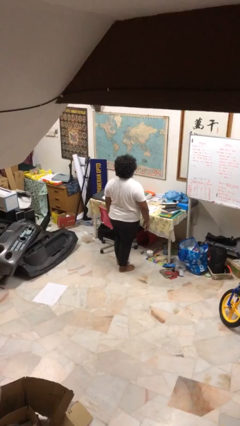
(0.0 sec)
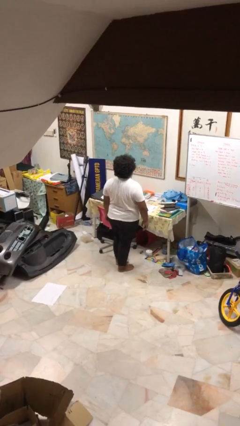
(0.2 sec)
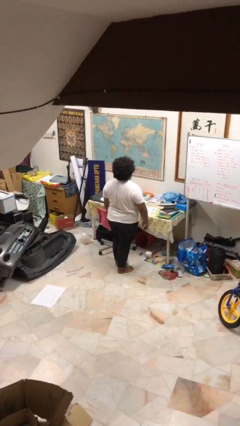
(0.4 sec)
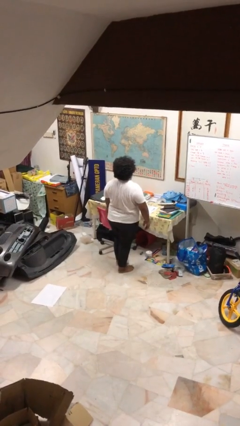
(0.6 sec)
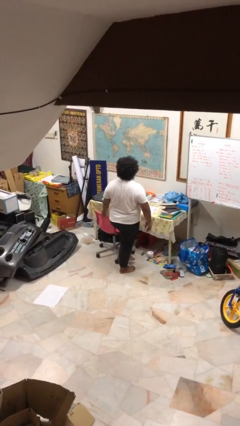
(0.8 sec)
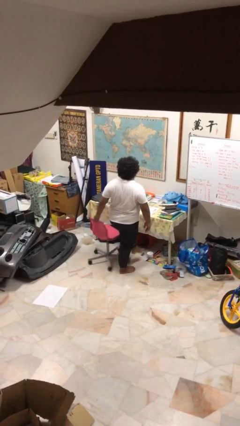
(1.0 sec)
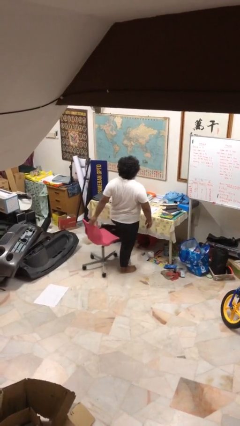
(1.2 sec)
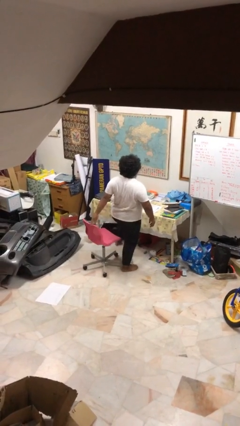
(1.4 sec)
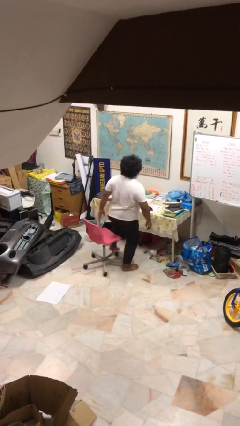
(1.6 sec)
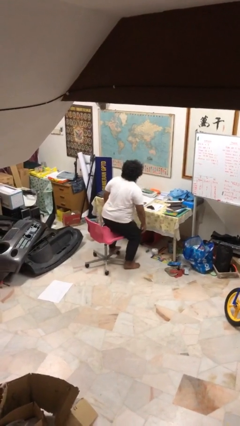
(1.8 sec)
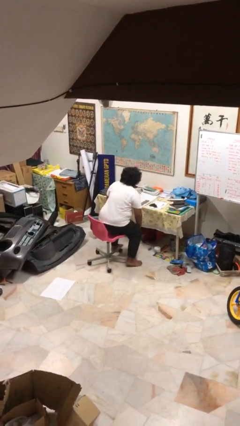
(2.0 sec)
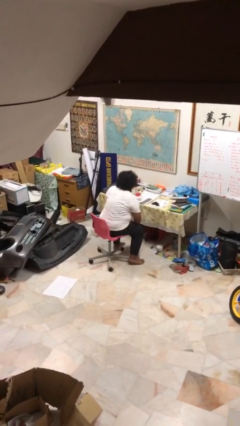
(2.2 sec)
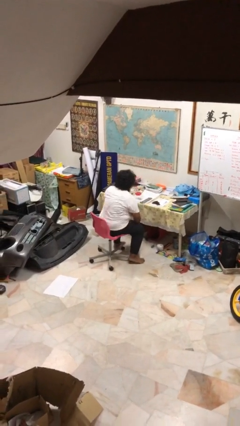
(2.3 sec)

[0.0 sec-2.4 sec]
person sits down

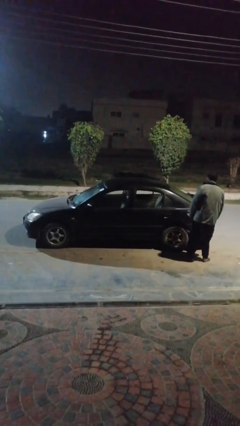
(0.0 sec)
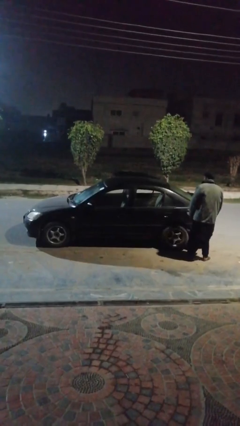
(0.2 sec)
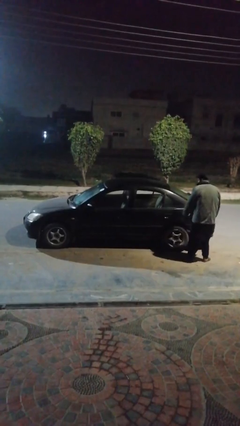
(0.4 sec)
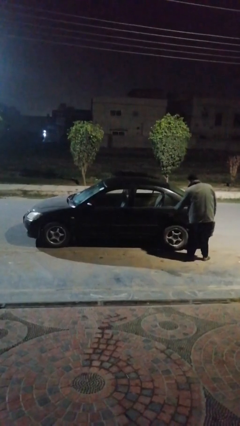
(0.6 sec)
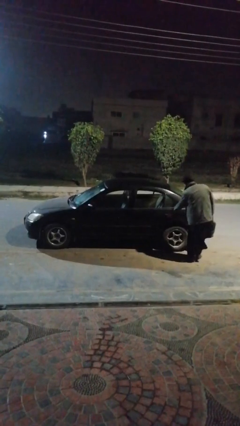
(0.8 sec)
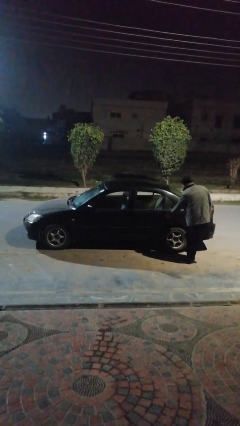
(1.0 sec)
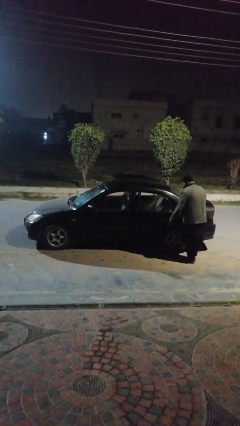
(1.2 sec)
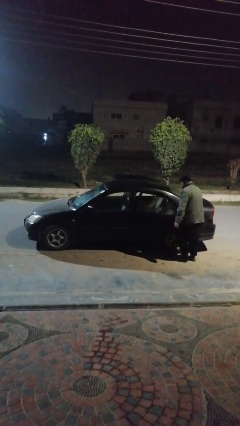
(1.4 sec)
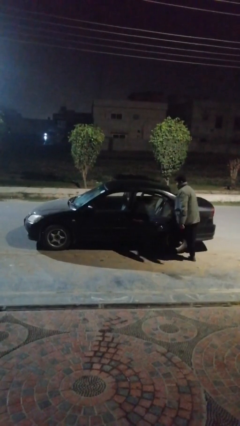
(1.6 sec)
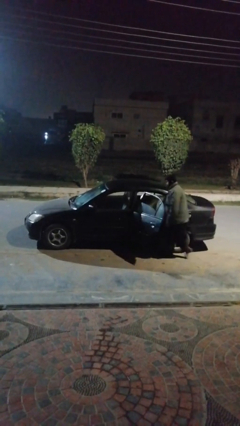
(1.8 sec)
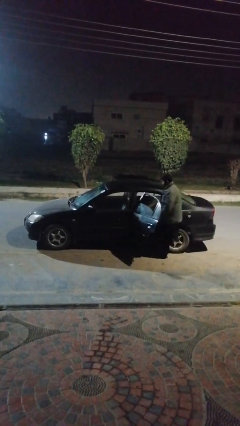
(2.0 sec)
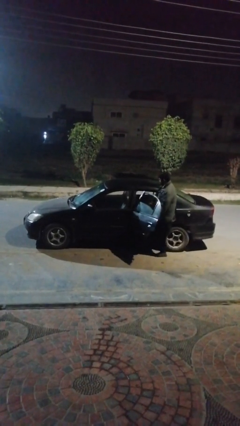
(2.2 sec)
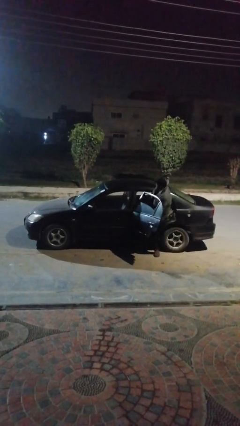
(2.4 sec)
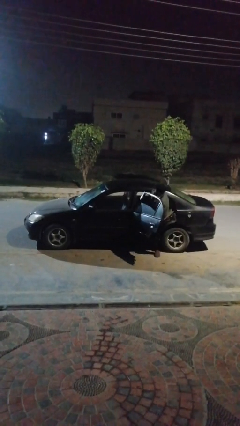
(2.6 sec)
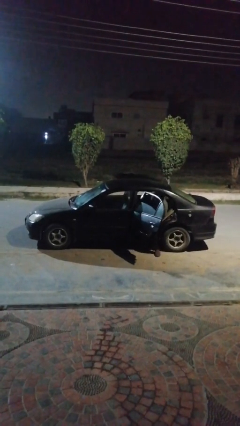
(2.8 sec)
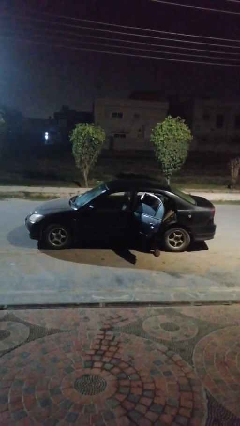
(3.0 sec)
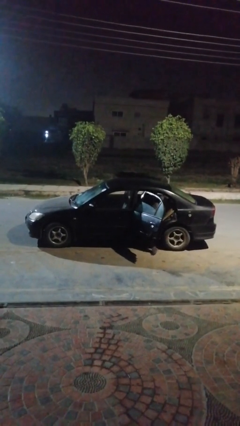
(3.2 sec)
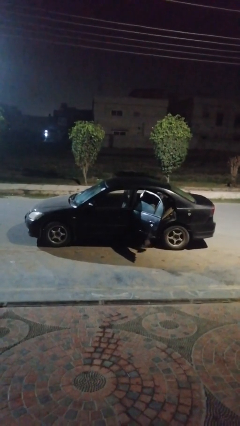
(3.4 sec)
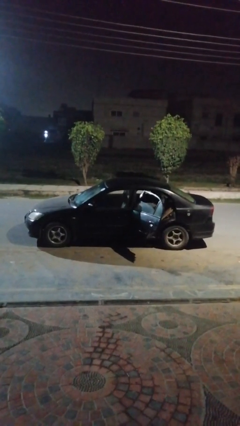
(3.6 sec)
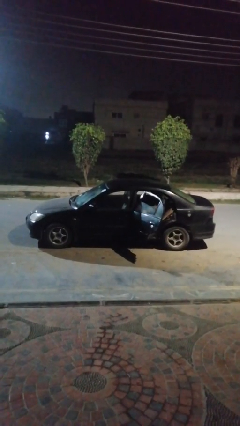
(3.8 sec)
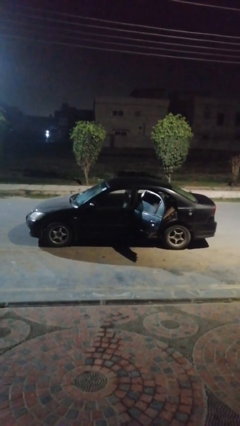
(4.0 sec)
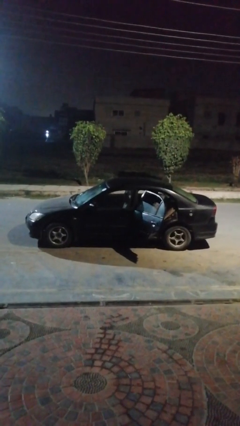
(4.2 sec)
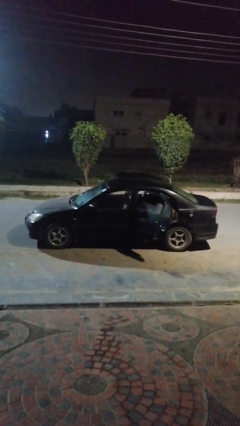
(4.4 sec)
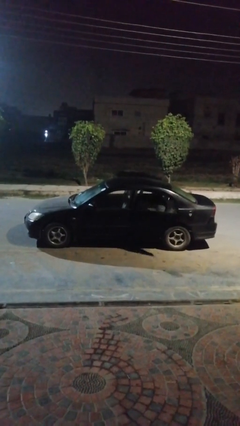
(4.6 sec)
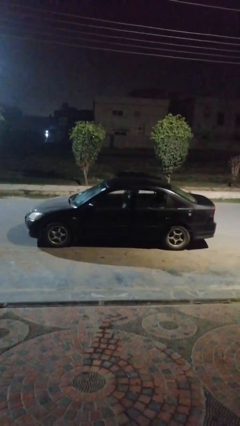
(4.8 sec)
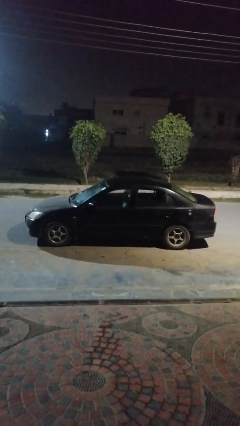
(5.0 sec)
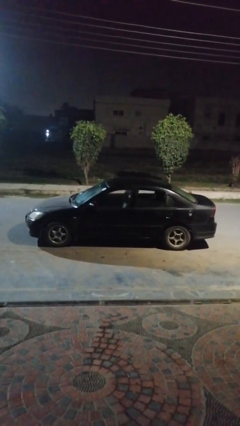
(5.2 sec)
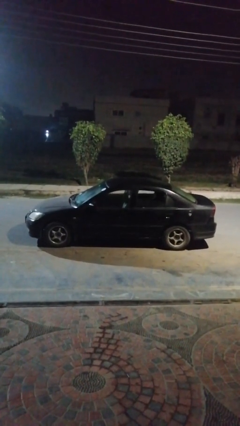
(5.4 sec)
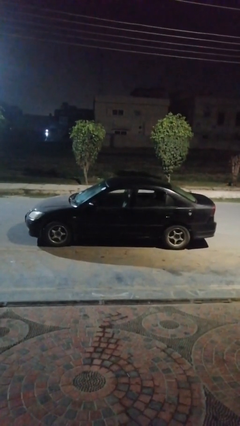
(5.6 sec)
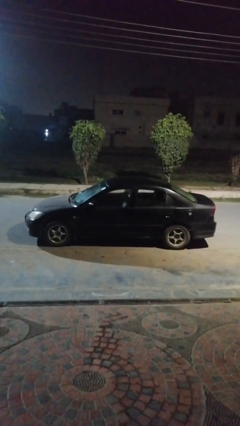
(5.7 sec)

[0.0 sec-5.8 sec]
car picks up person

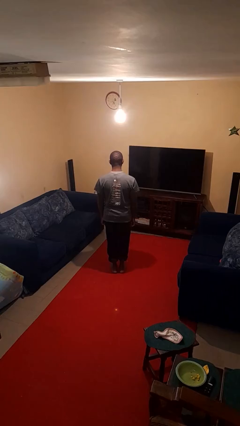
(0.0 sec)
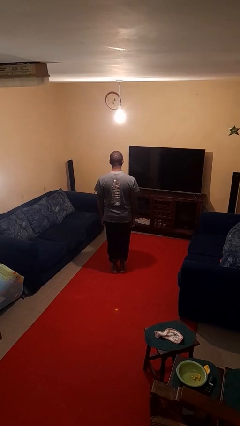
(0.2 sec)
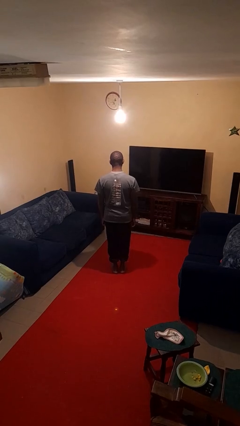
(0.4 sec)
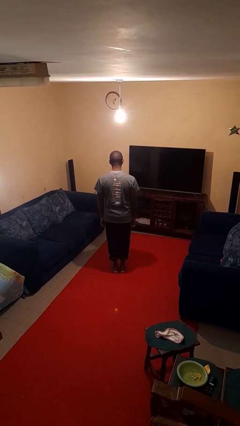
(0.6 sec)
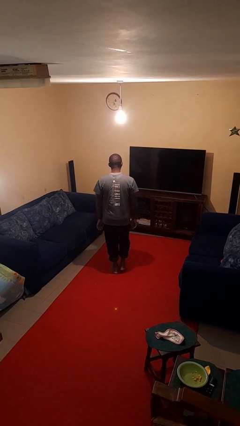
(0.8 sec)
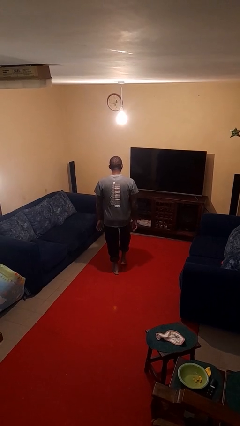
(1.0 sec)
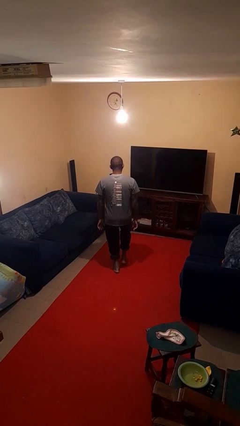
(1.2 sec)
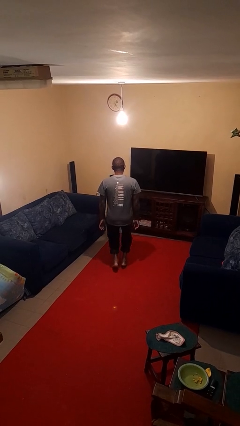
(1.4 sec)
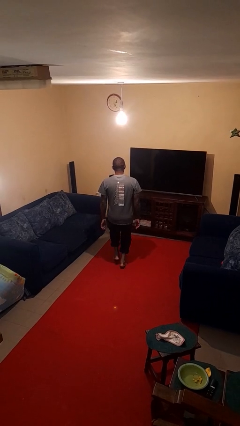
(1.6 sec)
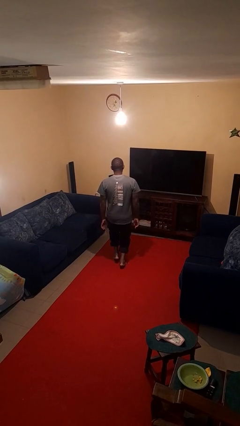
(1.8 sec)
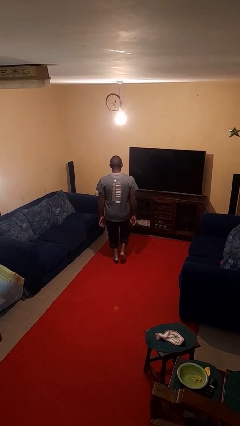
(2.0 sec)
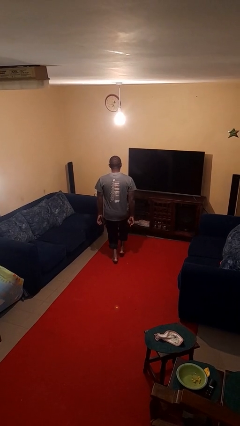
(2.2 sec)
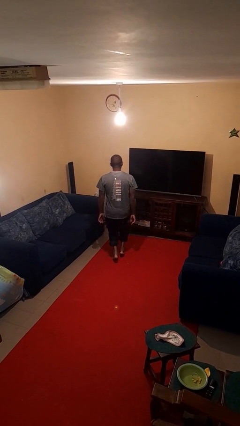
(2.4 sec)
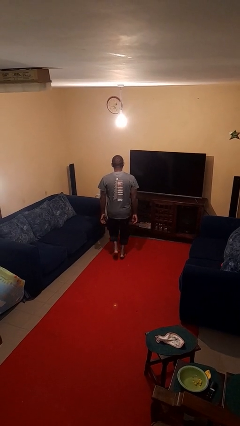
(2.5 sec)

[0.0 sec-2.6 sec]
person walks tiptoe

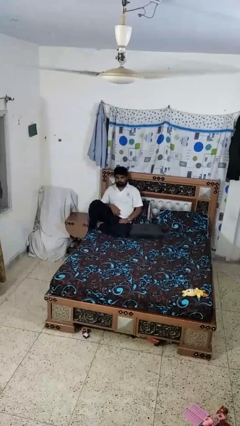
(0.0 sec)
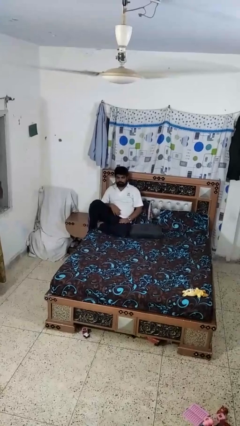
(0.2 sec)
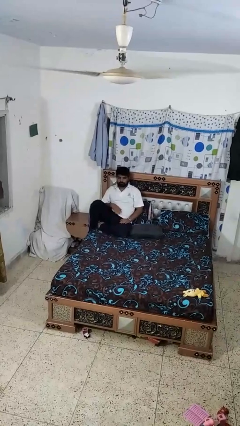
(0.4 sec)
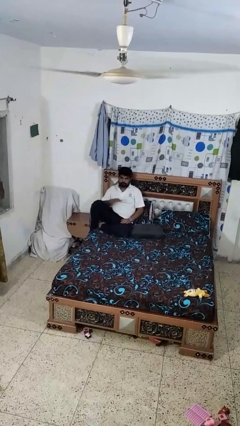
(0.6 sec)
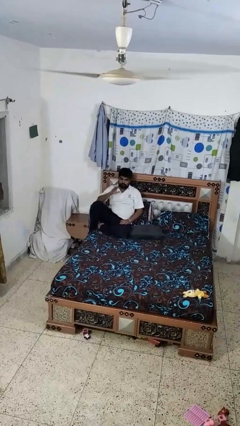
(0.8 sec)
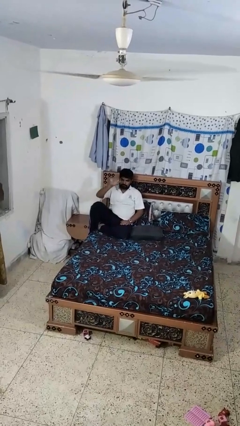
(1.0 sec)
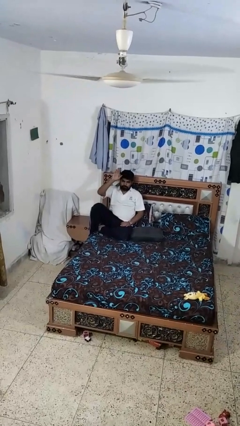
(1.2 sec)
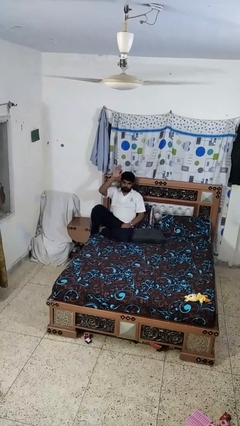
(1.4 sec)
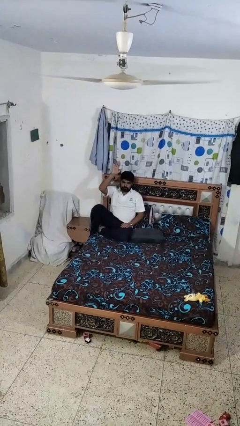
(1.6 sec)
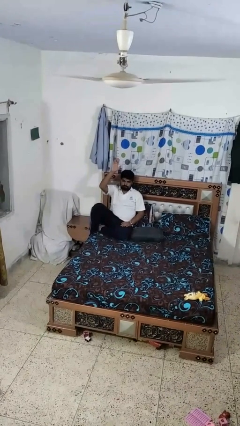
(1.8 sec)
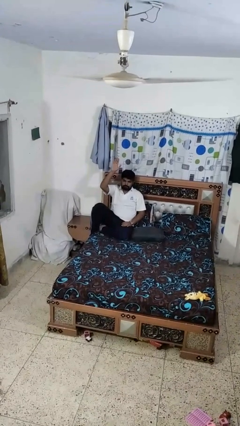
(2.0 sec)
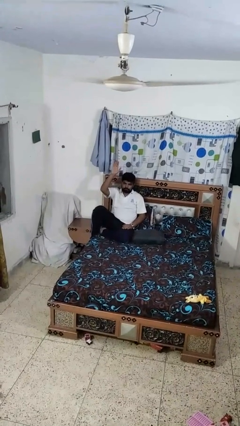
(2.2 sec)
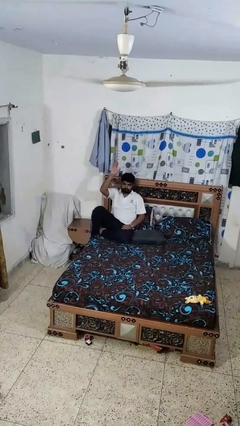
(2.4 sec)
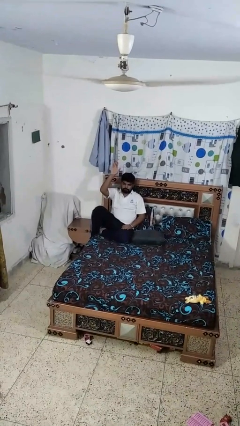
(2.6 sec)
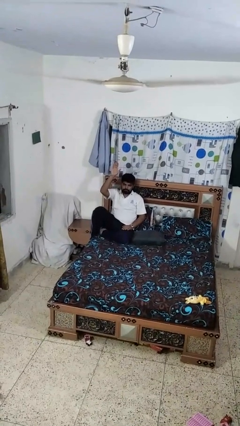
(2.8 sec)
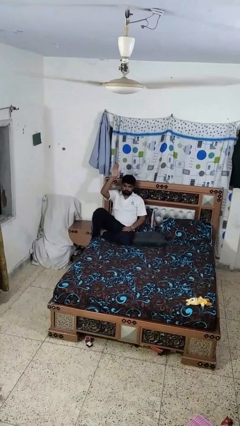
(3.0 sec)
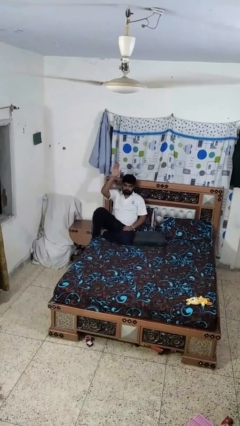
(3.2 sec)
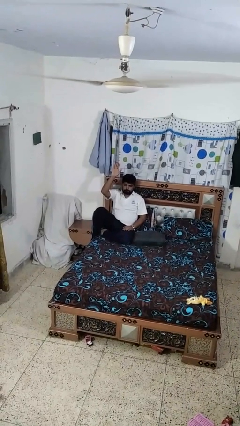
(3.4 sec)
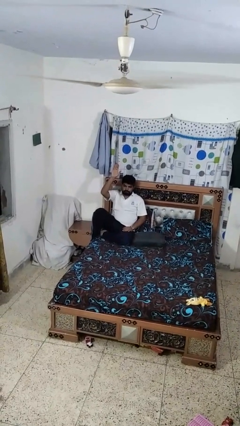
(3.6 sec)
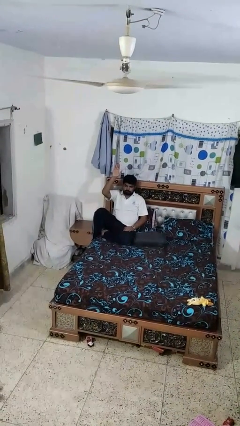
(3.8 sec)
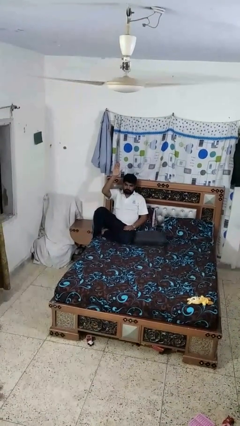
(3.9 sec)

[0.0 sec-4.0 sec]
person gestures raise hand

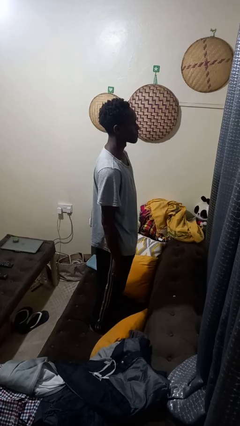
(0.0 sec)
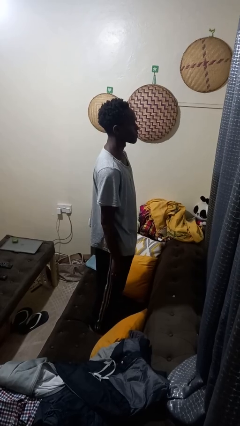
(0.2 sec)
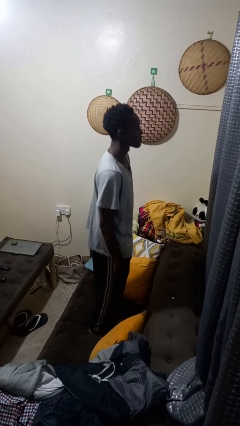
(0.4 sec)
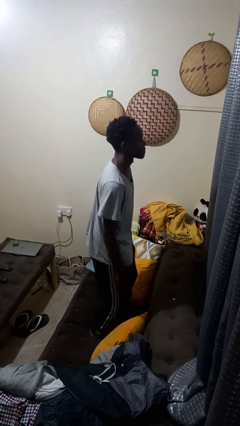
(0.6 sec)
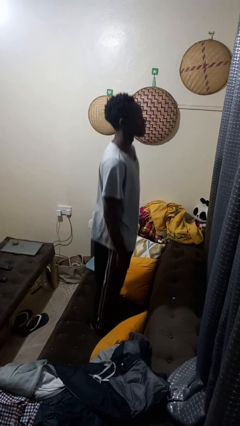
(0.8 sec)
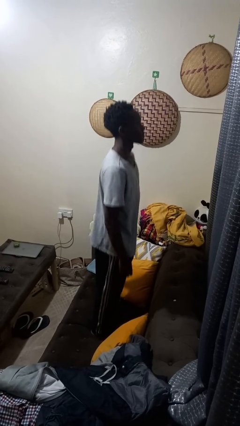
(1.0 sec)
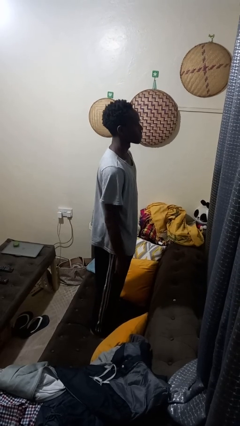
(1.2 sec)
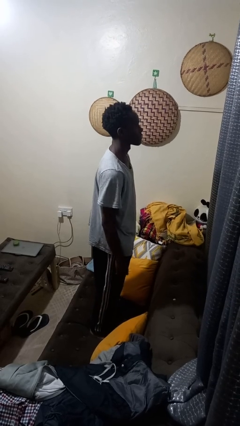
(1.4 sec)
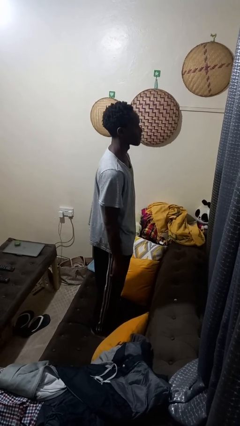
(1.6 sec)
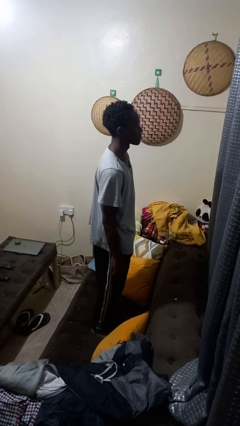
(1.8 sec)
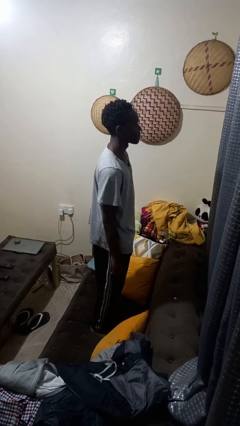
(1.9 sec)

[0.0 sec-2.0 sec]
person jumps on couch

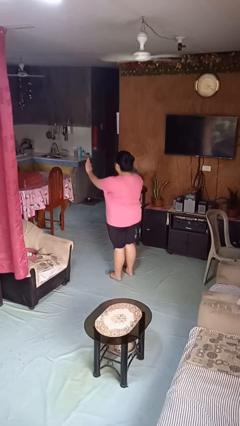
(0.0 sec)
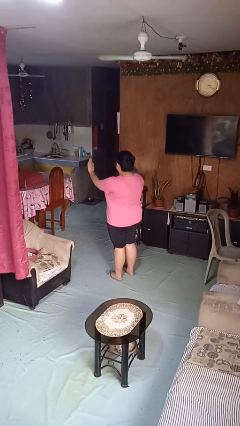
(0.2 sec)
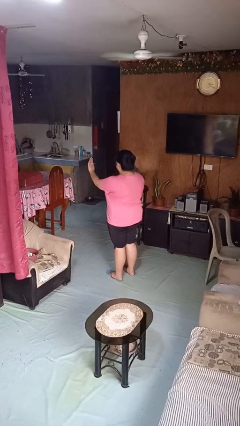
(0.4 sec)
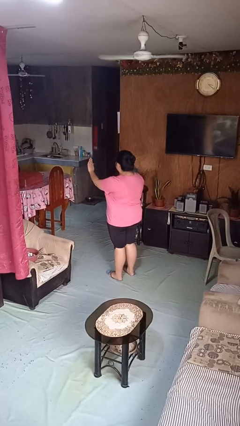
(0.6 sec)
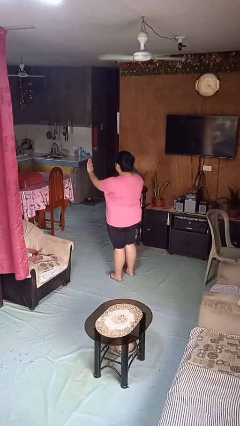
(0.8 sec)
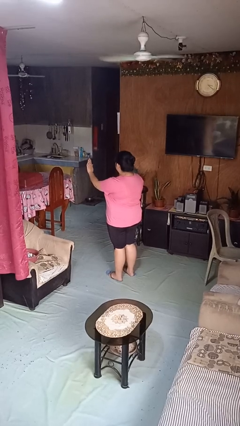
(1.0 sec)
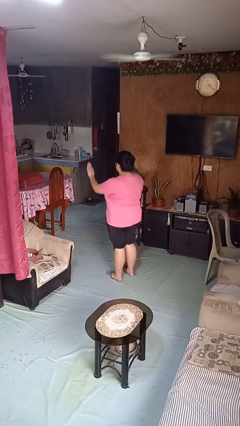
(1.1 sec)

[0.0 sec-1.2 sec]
person gestures stop
